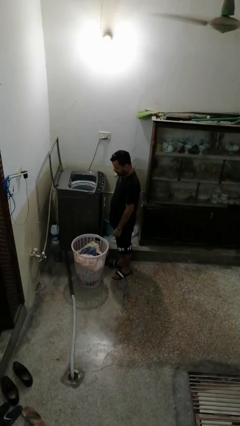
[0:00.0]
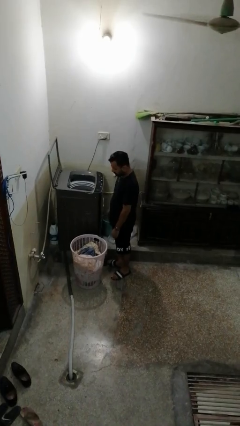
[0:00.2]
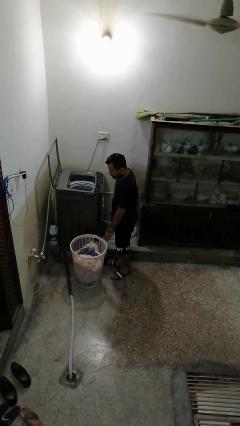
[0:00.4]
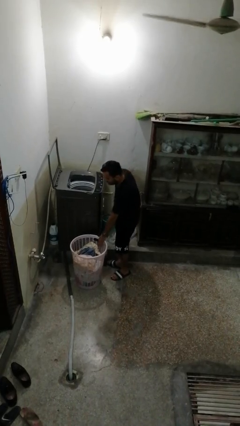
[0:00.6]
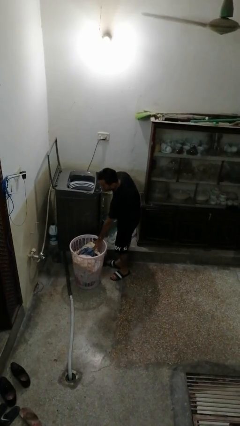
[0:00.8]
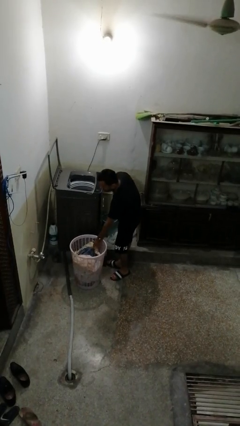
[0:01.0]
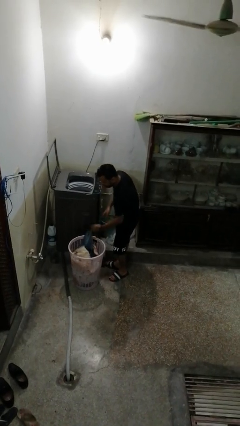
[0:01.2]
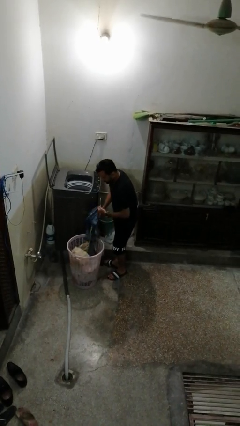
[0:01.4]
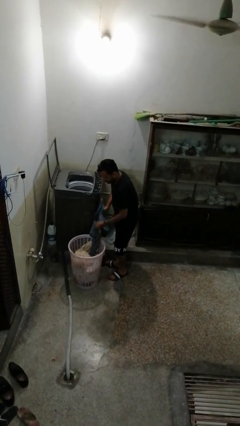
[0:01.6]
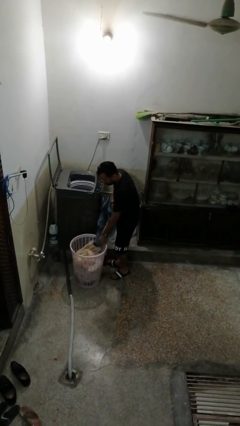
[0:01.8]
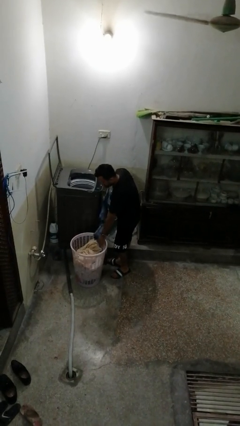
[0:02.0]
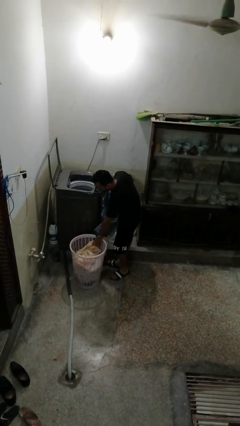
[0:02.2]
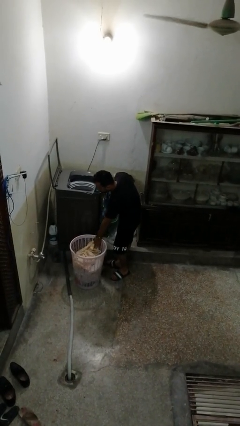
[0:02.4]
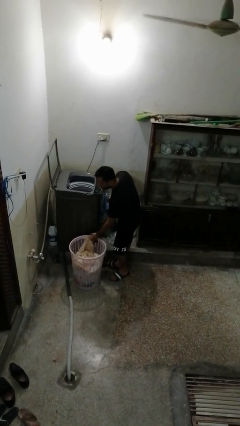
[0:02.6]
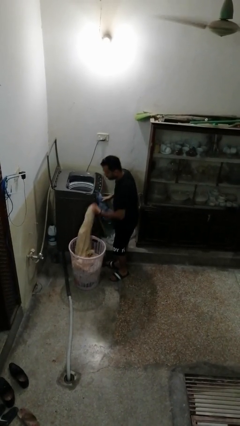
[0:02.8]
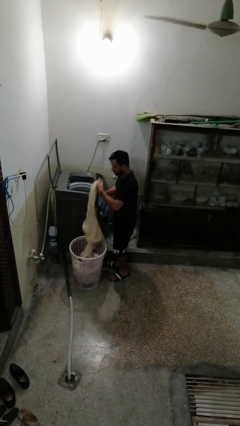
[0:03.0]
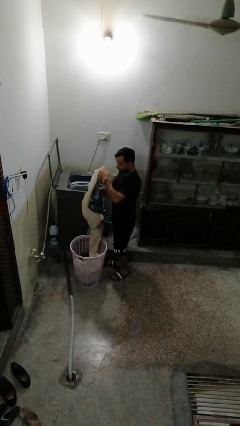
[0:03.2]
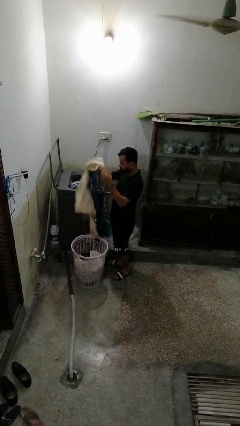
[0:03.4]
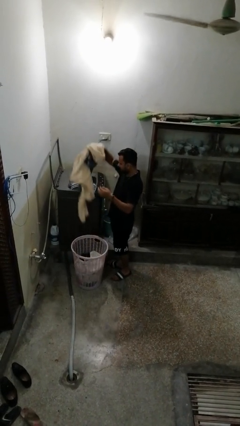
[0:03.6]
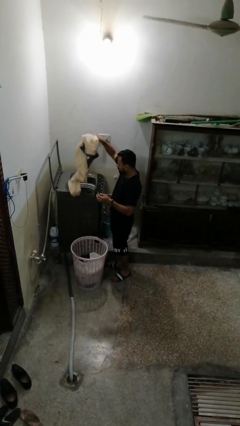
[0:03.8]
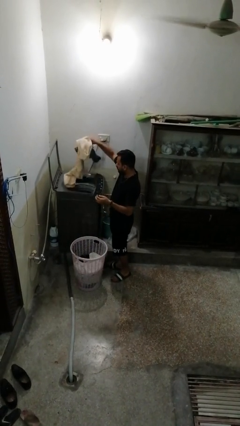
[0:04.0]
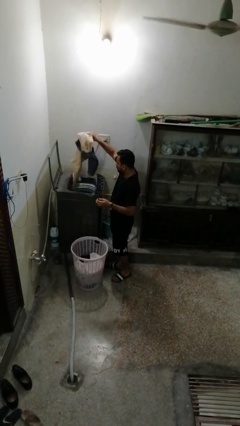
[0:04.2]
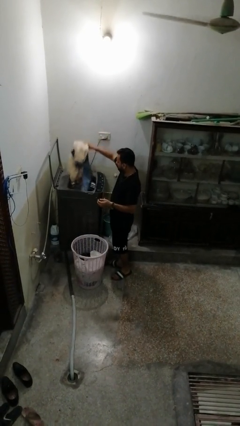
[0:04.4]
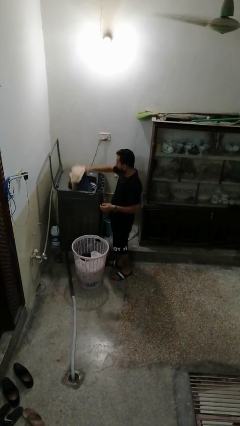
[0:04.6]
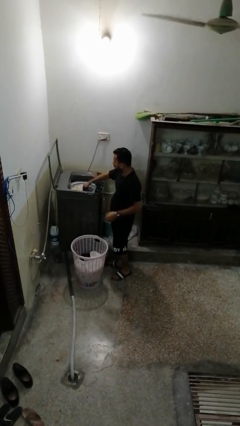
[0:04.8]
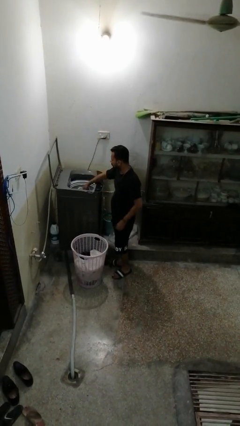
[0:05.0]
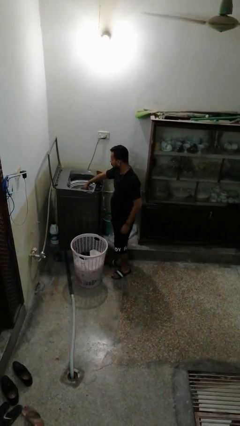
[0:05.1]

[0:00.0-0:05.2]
person loads dryer

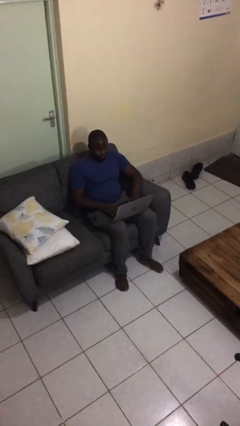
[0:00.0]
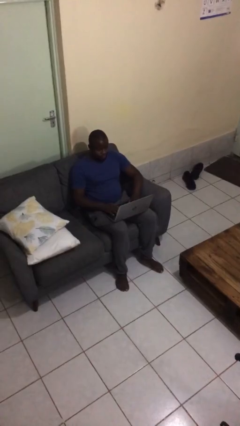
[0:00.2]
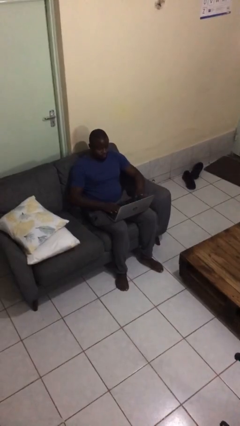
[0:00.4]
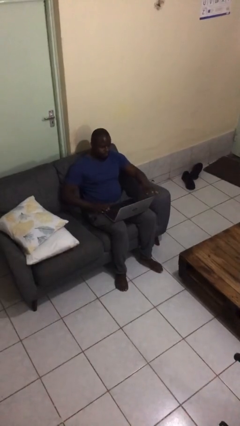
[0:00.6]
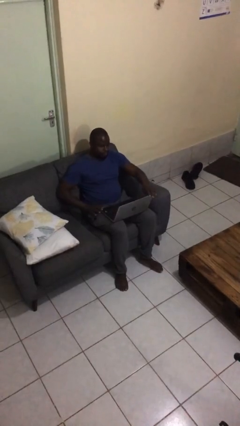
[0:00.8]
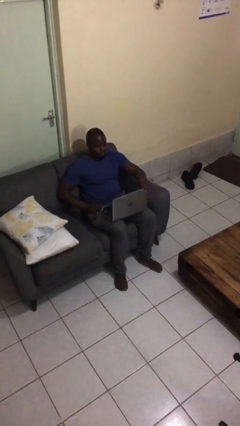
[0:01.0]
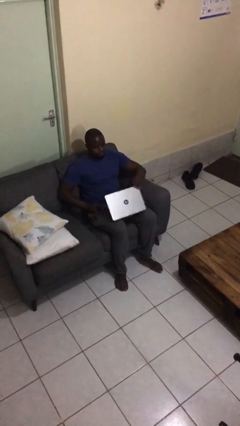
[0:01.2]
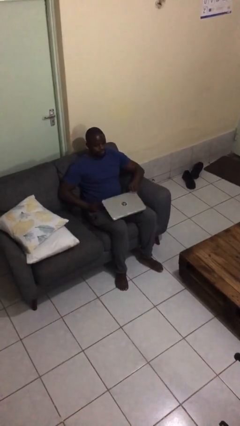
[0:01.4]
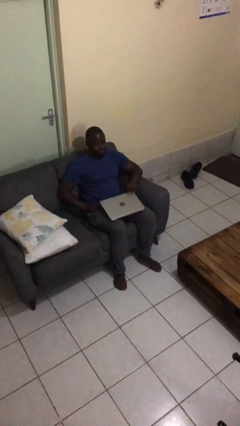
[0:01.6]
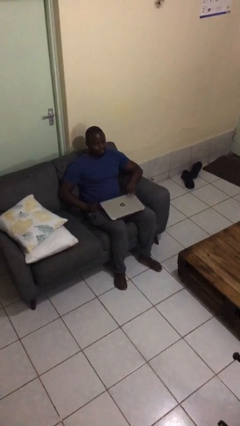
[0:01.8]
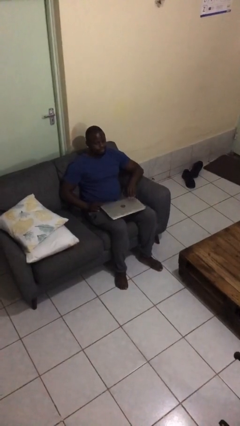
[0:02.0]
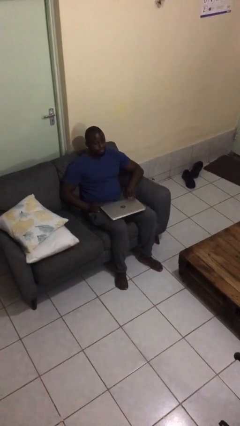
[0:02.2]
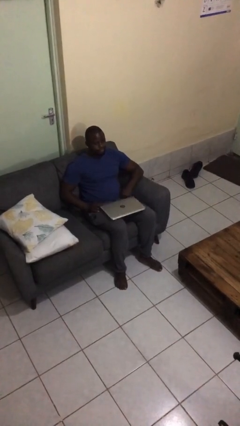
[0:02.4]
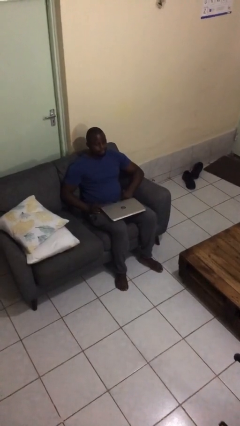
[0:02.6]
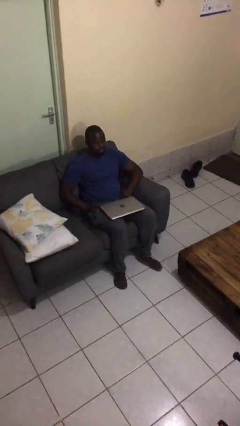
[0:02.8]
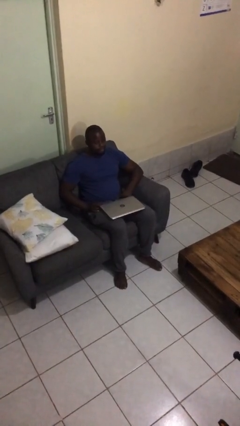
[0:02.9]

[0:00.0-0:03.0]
person closes laptop

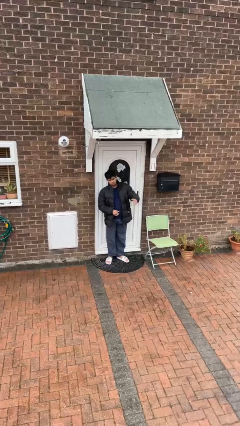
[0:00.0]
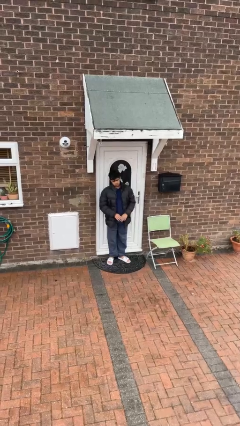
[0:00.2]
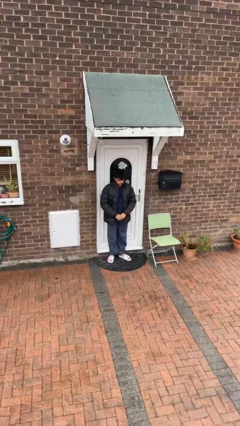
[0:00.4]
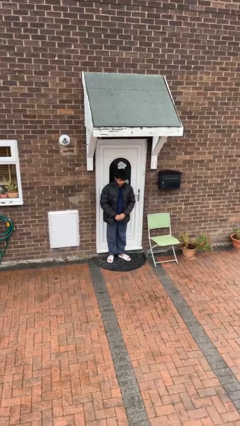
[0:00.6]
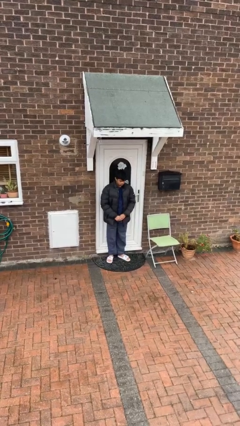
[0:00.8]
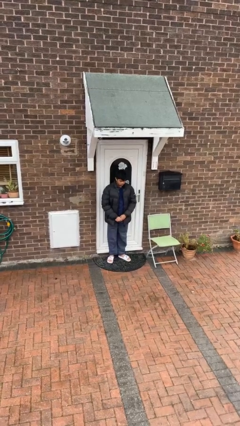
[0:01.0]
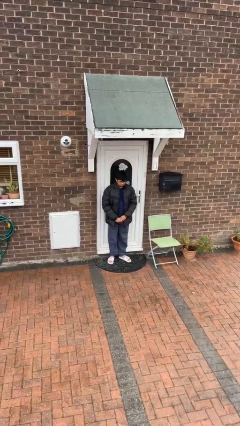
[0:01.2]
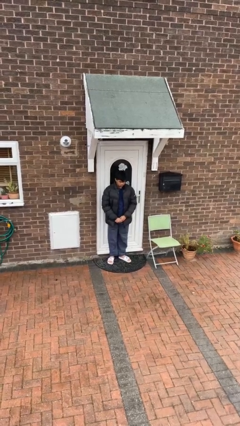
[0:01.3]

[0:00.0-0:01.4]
person gestures lower hand

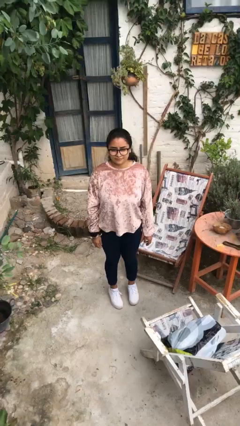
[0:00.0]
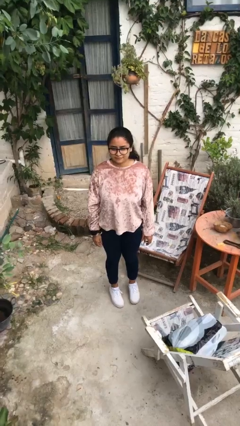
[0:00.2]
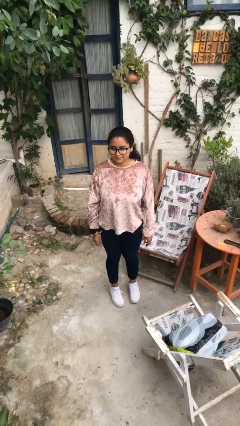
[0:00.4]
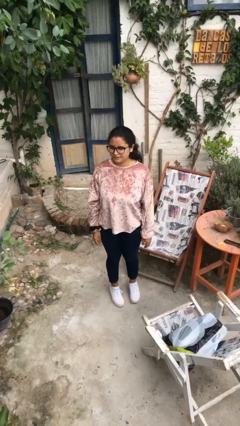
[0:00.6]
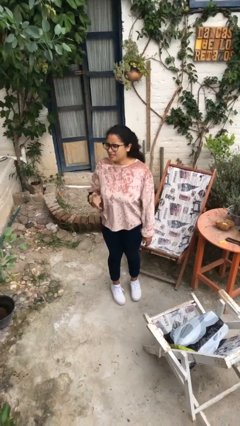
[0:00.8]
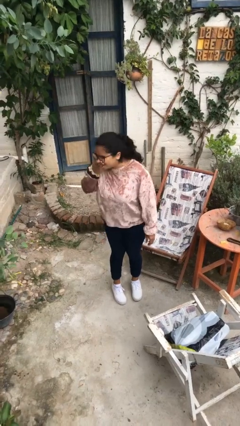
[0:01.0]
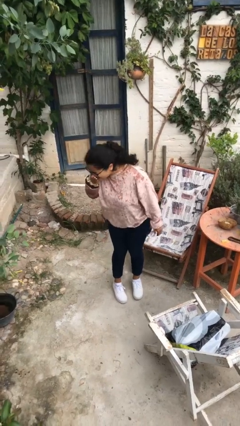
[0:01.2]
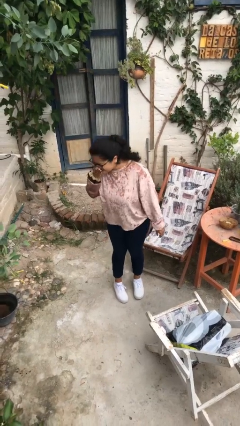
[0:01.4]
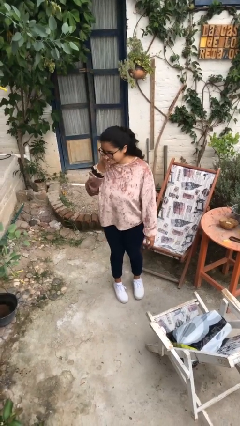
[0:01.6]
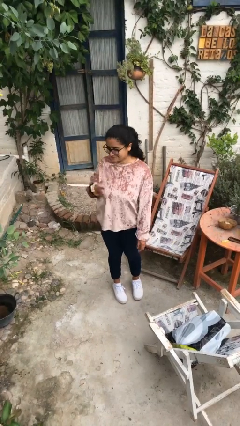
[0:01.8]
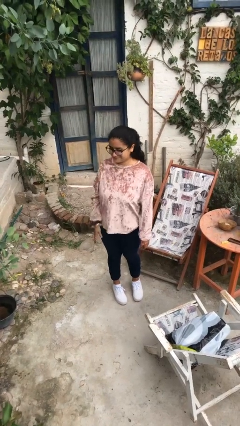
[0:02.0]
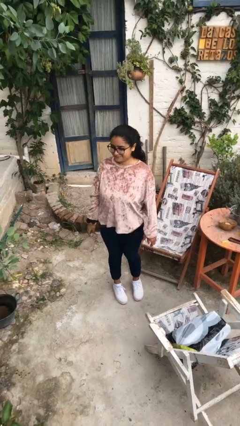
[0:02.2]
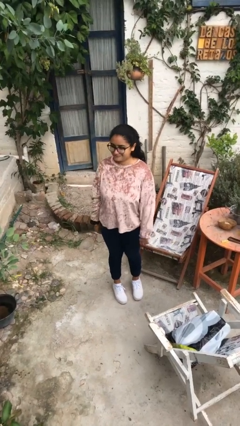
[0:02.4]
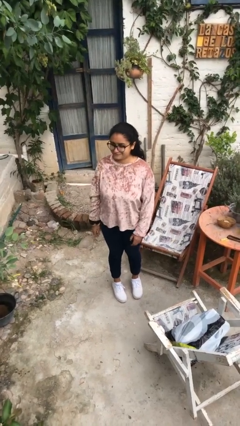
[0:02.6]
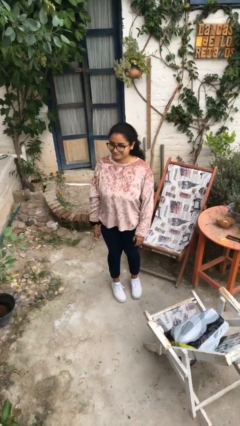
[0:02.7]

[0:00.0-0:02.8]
person sneezes into hand

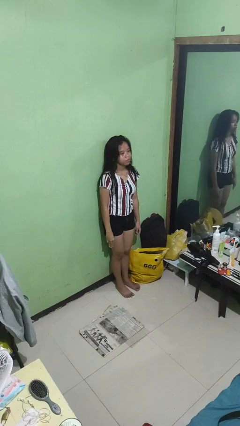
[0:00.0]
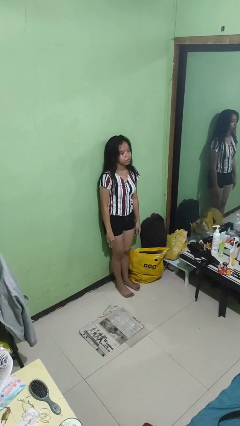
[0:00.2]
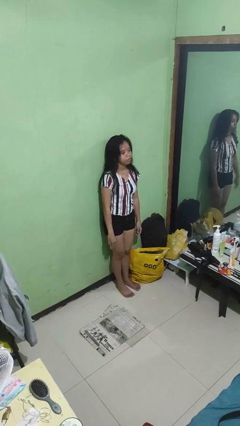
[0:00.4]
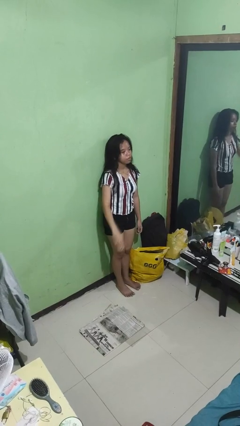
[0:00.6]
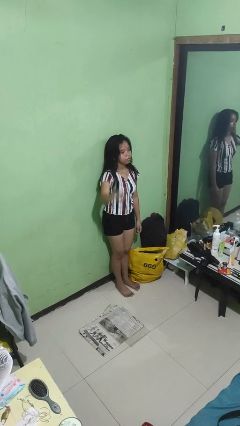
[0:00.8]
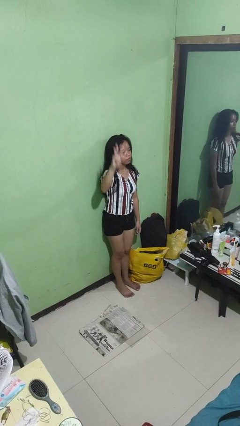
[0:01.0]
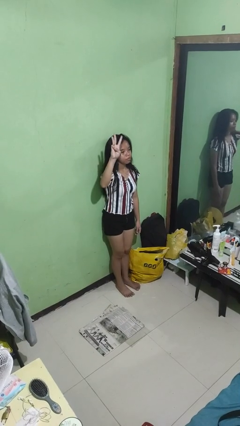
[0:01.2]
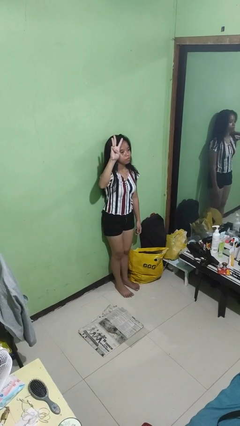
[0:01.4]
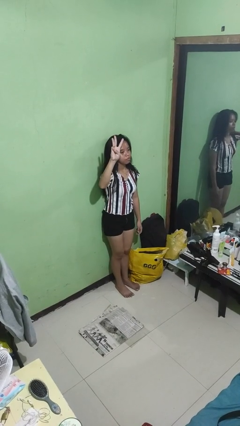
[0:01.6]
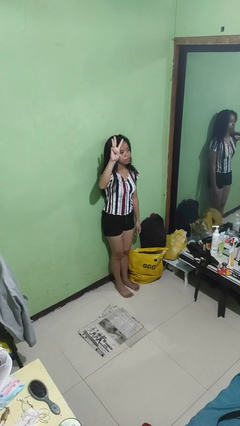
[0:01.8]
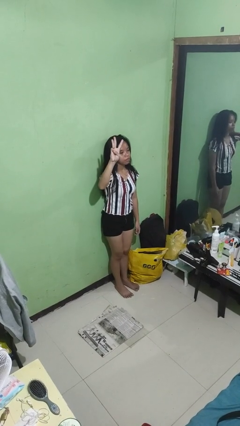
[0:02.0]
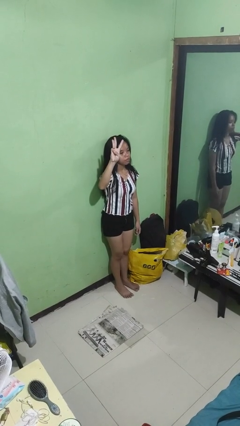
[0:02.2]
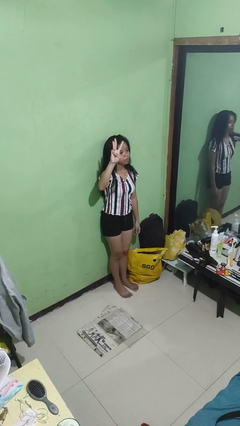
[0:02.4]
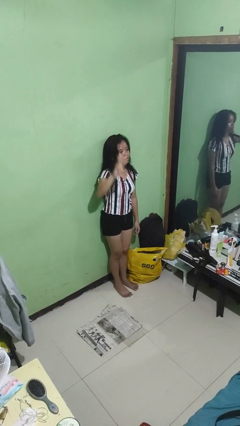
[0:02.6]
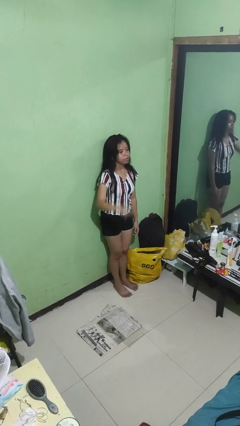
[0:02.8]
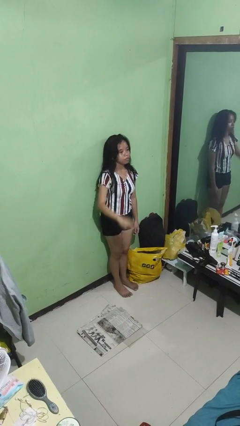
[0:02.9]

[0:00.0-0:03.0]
person gestures number three

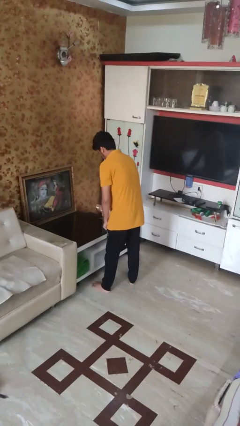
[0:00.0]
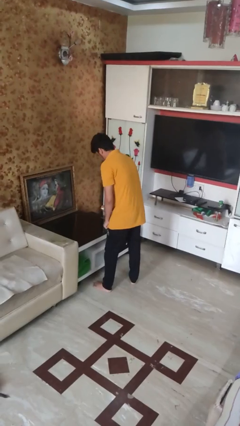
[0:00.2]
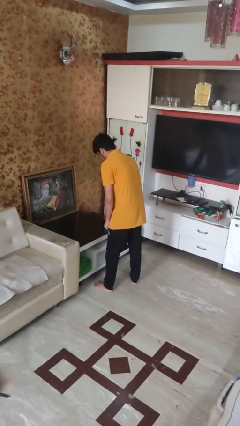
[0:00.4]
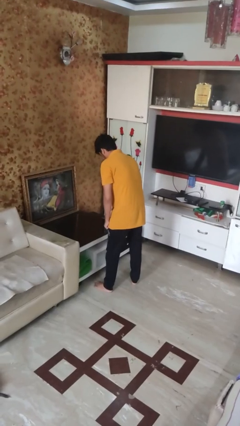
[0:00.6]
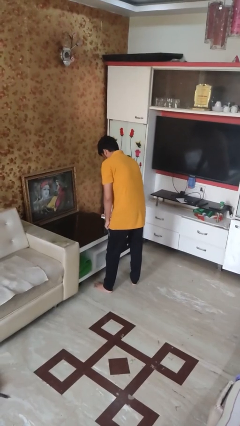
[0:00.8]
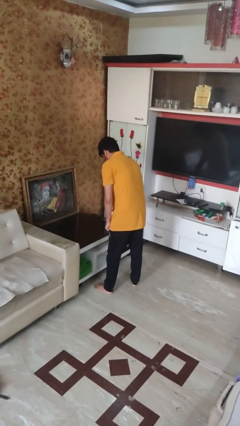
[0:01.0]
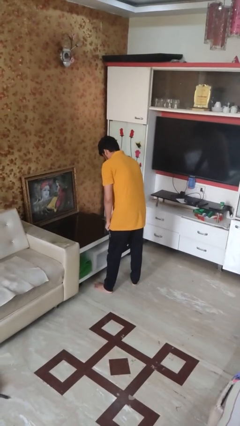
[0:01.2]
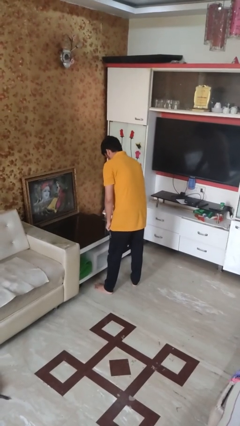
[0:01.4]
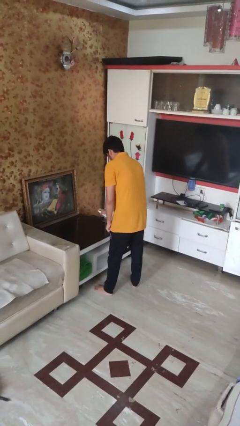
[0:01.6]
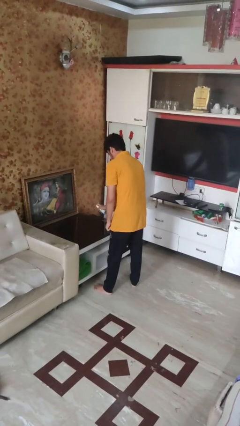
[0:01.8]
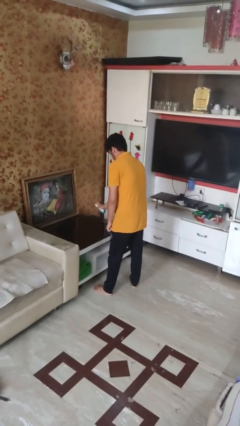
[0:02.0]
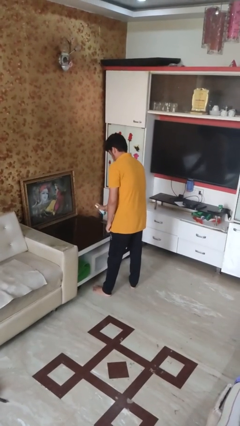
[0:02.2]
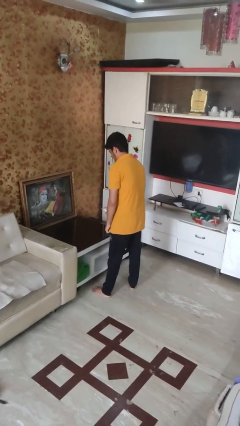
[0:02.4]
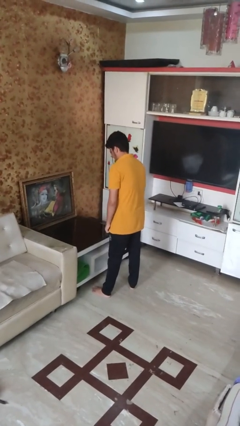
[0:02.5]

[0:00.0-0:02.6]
person sprays from bottle
